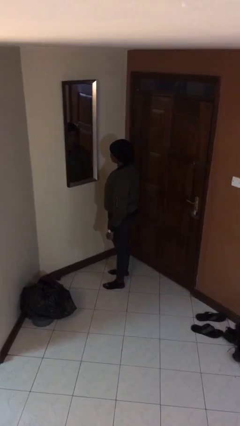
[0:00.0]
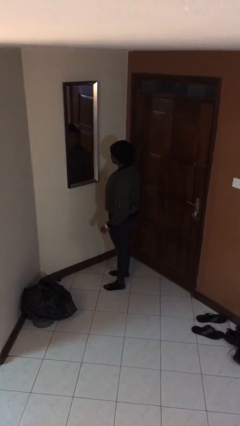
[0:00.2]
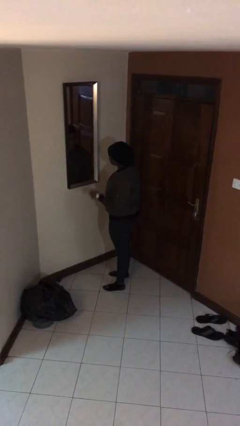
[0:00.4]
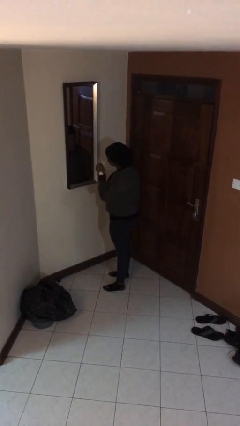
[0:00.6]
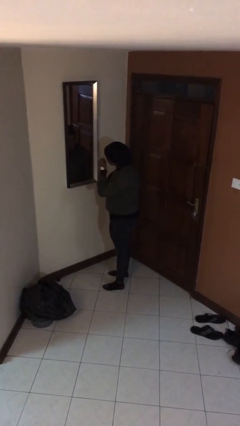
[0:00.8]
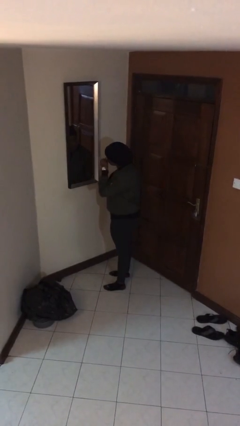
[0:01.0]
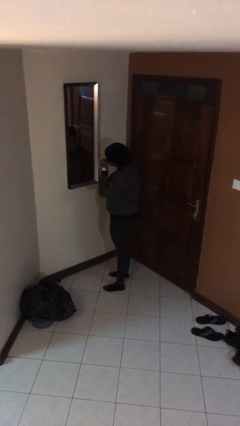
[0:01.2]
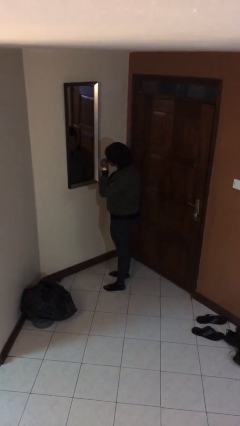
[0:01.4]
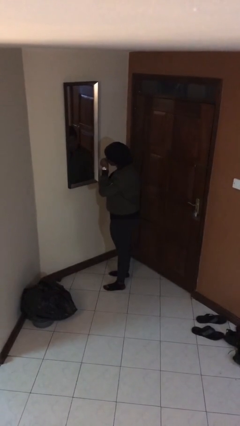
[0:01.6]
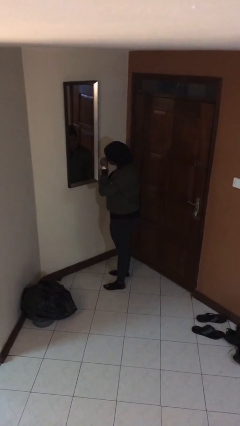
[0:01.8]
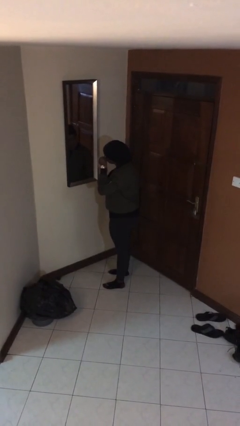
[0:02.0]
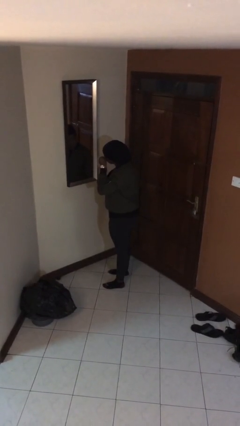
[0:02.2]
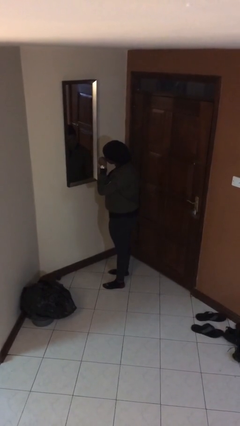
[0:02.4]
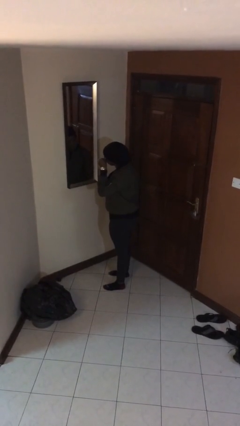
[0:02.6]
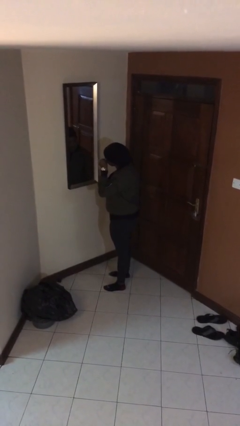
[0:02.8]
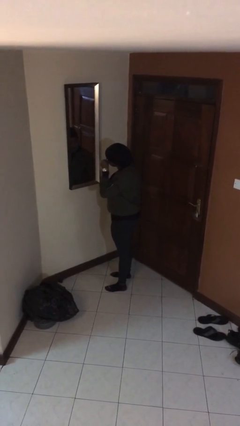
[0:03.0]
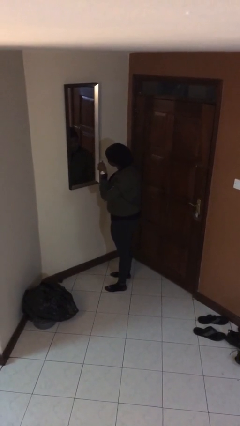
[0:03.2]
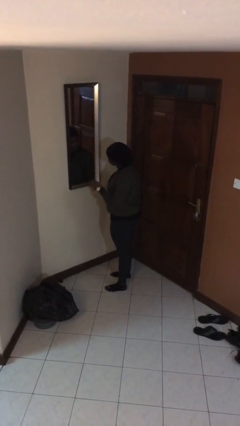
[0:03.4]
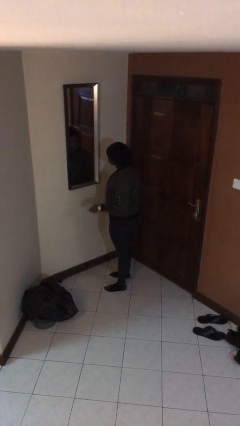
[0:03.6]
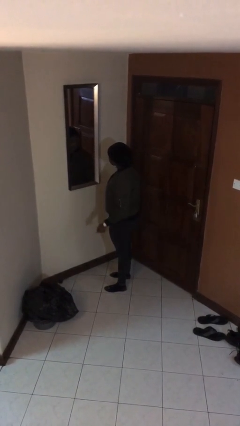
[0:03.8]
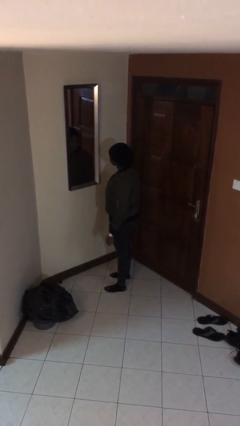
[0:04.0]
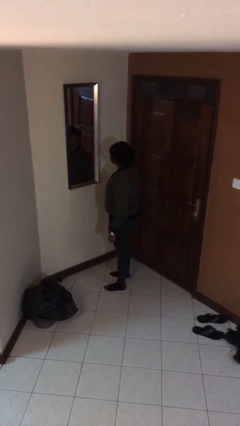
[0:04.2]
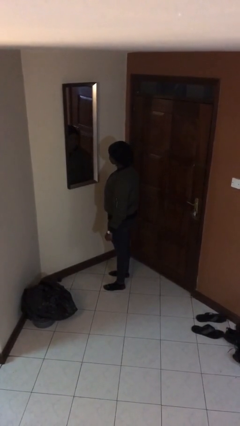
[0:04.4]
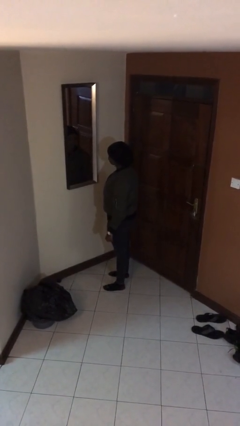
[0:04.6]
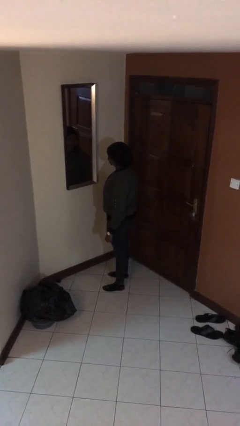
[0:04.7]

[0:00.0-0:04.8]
person applies eye makeup

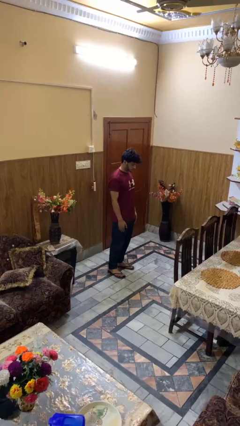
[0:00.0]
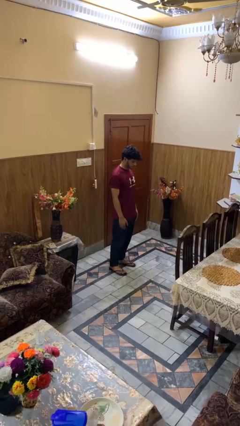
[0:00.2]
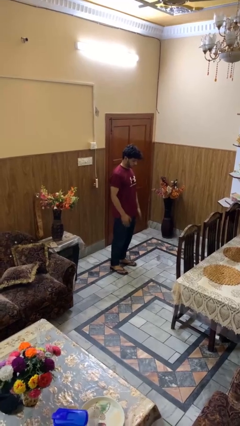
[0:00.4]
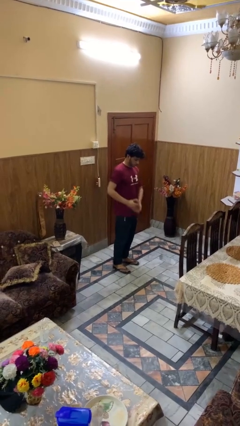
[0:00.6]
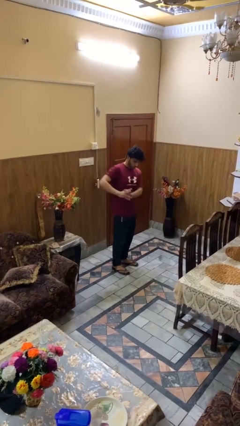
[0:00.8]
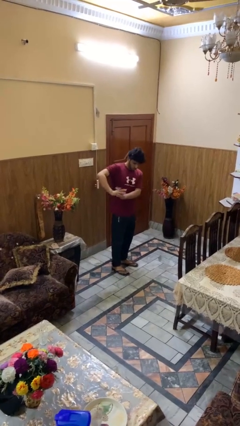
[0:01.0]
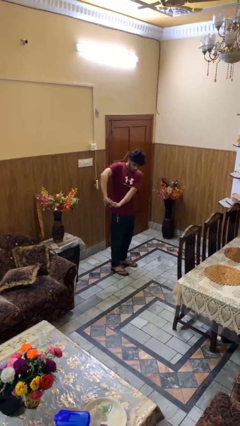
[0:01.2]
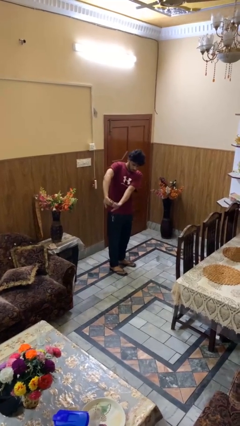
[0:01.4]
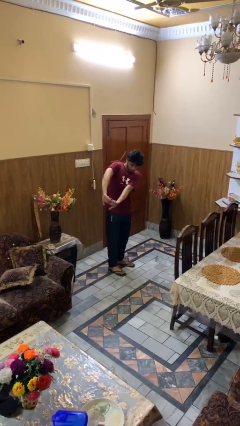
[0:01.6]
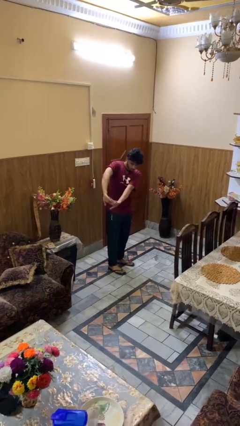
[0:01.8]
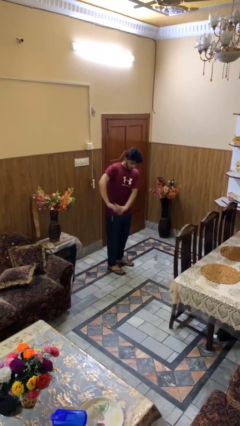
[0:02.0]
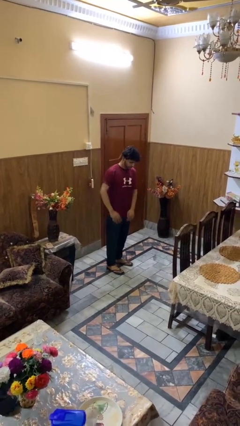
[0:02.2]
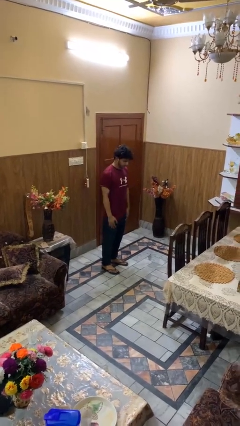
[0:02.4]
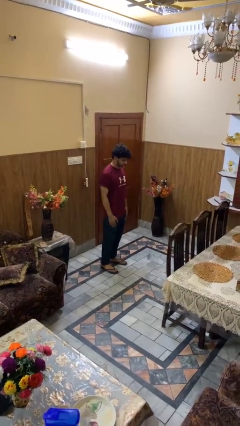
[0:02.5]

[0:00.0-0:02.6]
person stretches arms to side

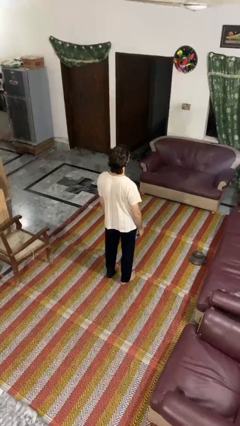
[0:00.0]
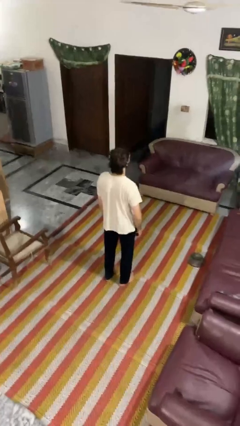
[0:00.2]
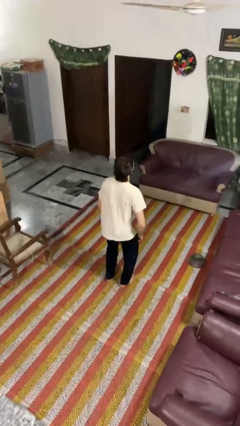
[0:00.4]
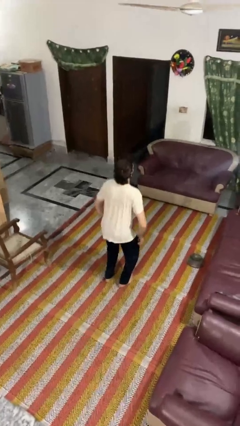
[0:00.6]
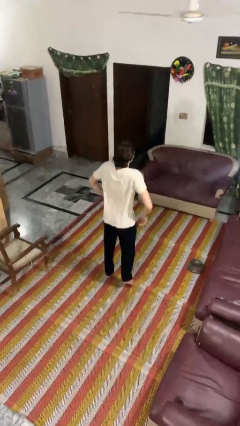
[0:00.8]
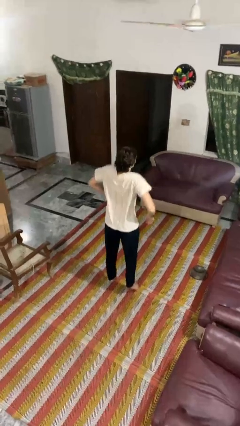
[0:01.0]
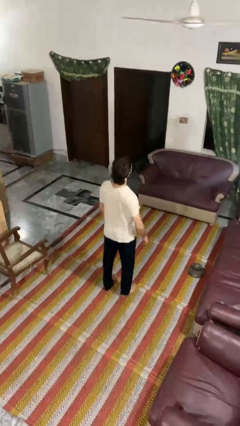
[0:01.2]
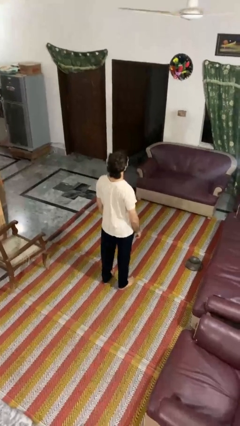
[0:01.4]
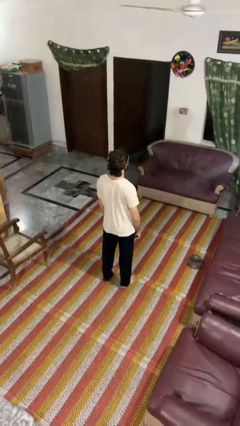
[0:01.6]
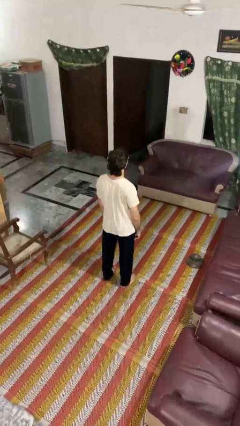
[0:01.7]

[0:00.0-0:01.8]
person jumps

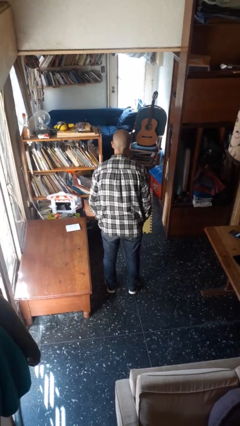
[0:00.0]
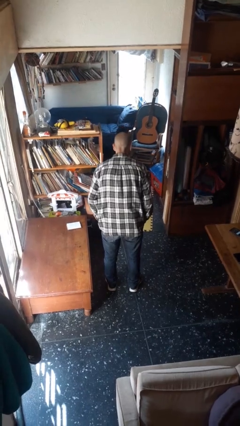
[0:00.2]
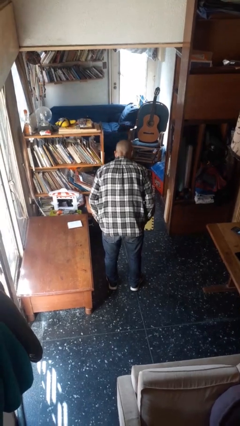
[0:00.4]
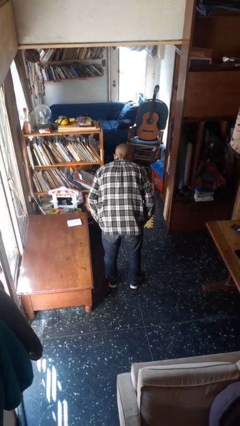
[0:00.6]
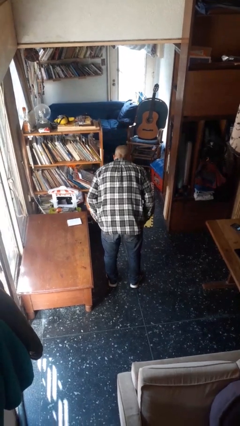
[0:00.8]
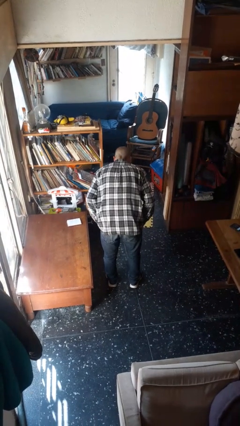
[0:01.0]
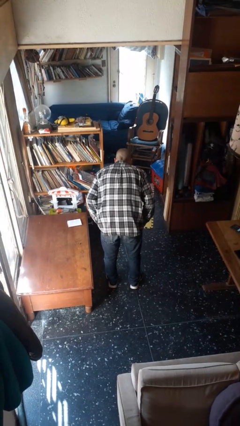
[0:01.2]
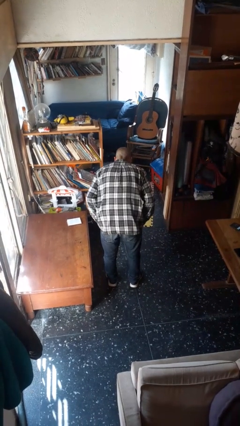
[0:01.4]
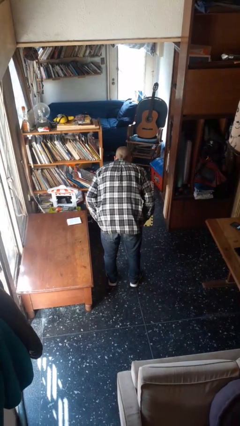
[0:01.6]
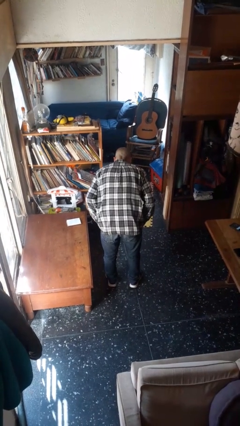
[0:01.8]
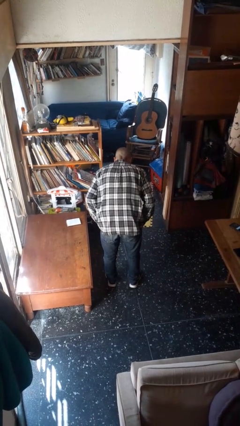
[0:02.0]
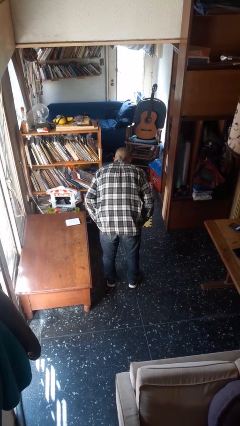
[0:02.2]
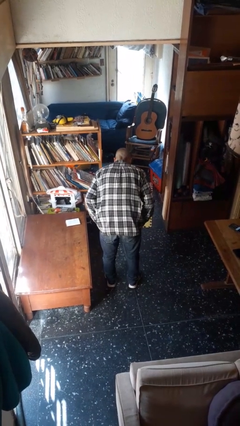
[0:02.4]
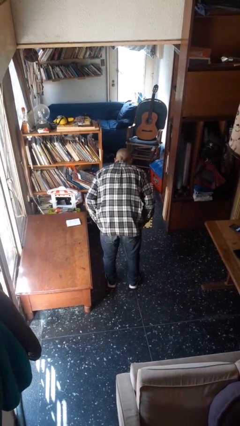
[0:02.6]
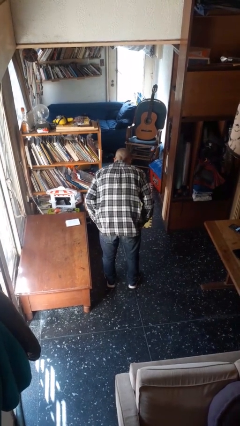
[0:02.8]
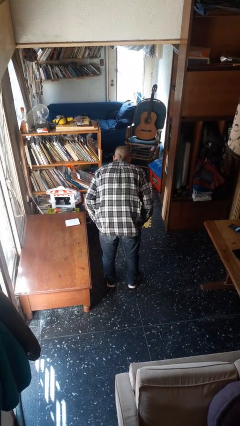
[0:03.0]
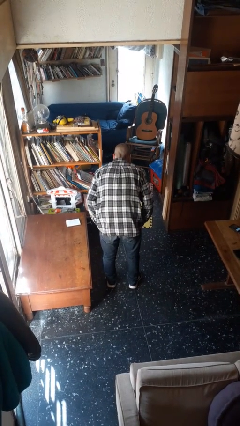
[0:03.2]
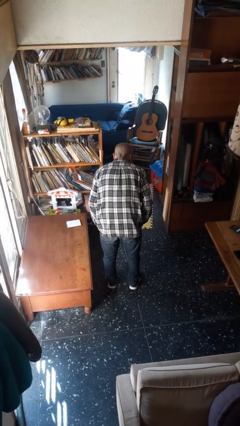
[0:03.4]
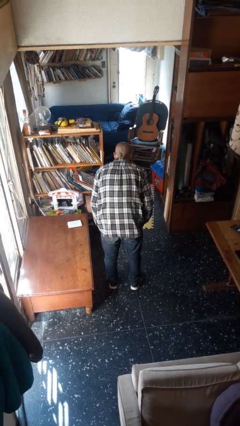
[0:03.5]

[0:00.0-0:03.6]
person bows

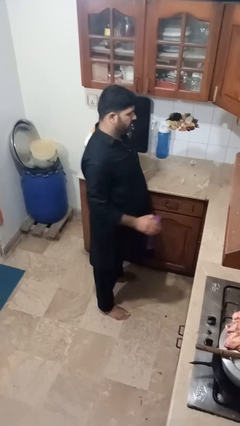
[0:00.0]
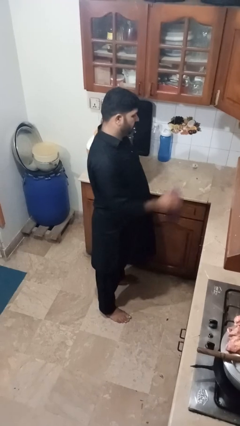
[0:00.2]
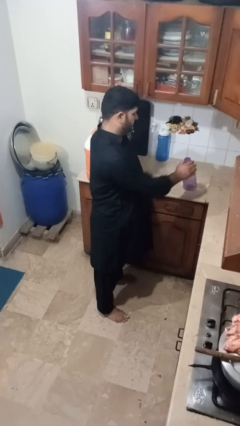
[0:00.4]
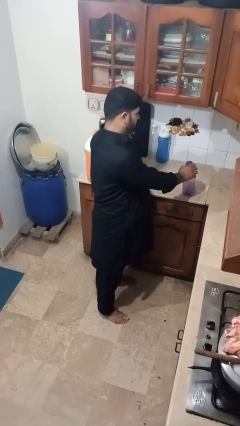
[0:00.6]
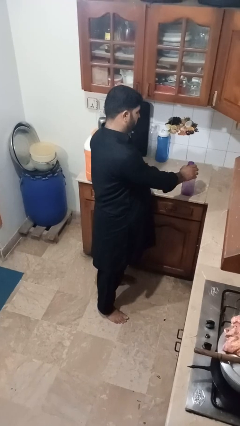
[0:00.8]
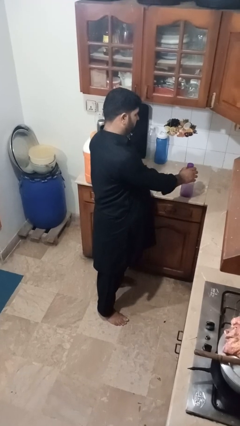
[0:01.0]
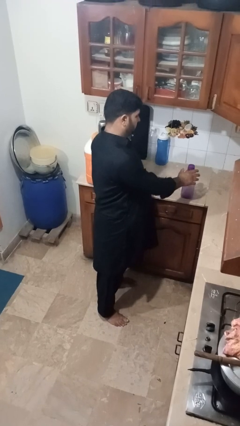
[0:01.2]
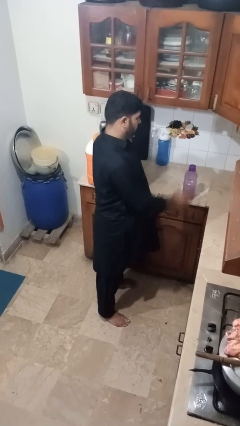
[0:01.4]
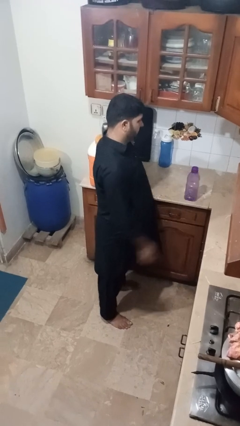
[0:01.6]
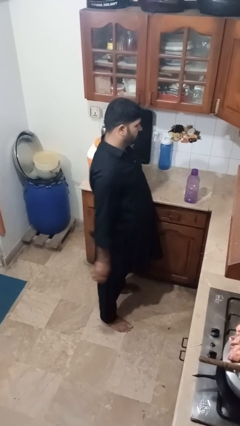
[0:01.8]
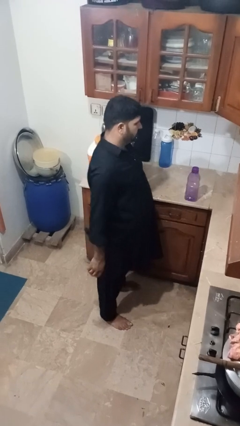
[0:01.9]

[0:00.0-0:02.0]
person puts down object on countertop

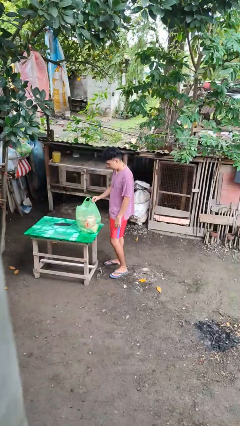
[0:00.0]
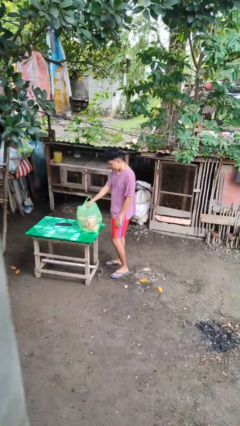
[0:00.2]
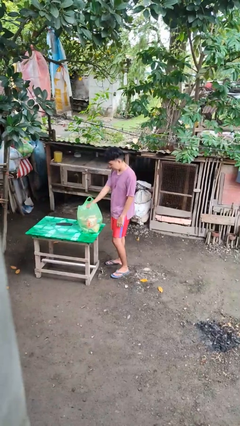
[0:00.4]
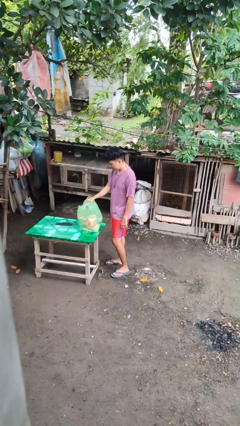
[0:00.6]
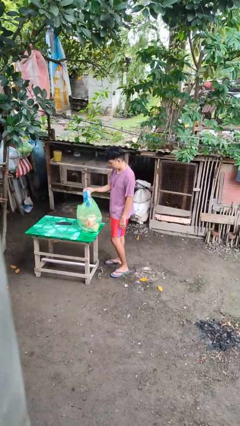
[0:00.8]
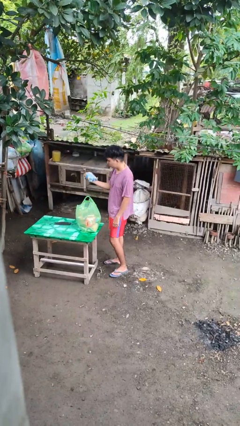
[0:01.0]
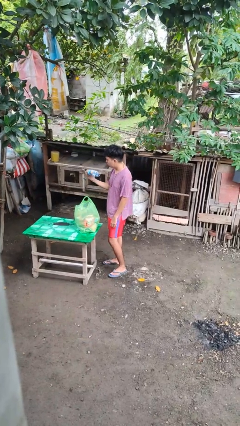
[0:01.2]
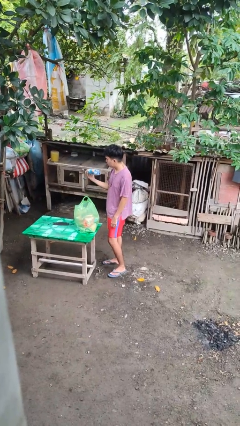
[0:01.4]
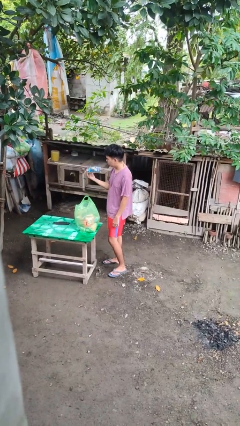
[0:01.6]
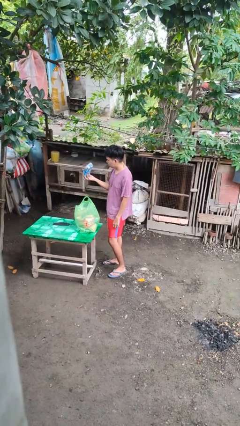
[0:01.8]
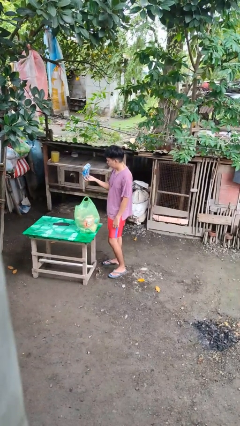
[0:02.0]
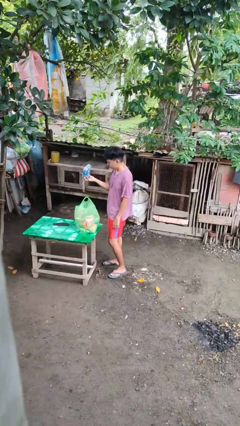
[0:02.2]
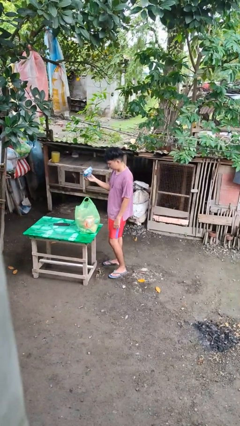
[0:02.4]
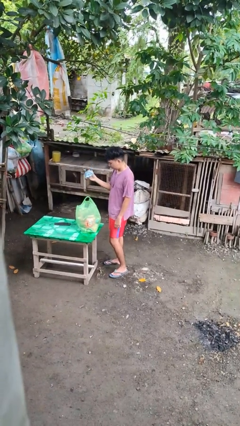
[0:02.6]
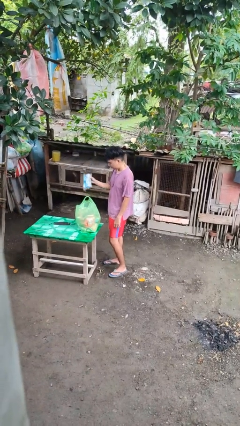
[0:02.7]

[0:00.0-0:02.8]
person takes object from bag

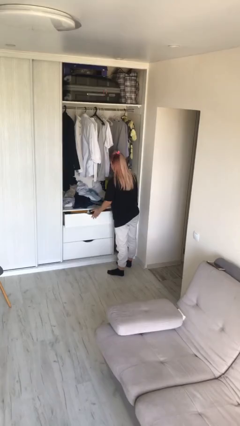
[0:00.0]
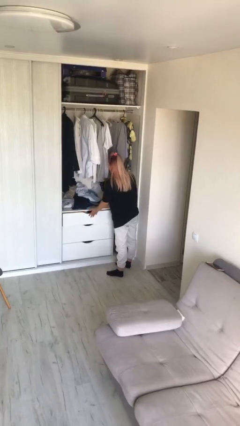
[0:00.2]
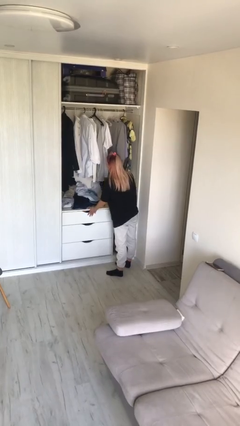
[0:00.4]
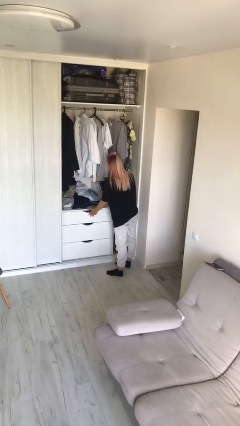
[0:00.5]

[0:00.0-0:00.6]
person closes dresser drawer
